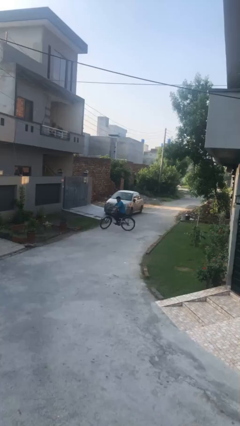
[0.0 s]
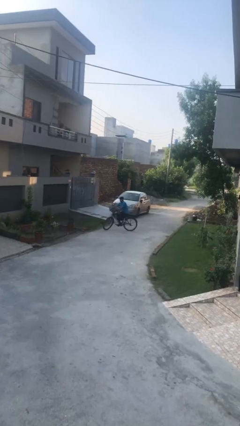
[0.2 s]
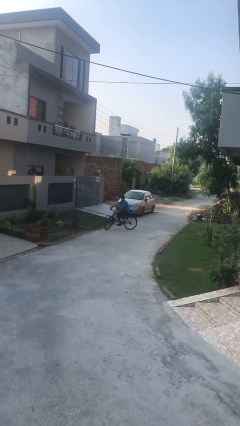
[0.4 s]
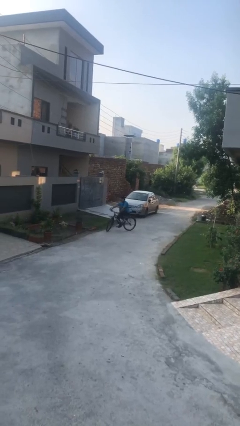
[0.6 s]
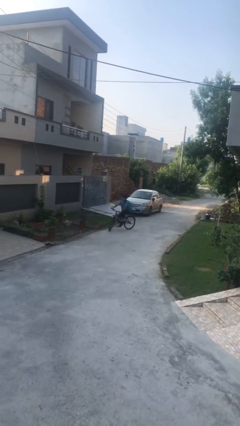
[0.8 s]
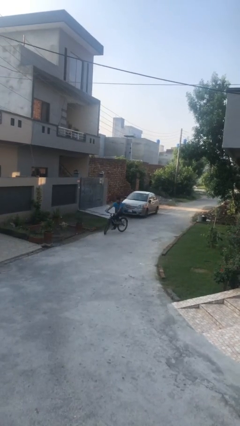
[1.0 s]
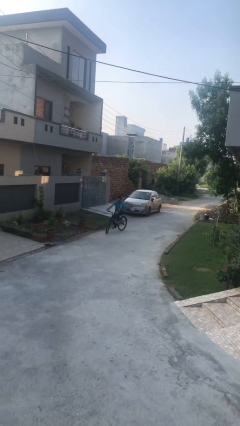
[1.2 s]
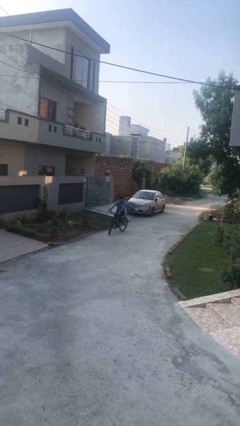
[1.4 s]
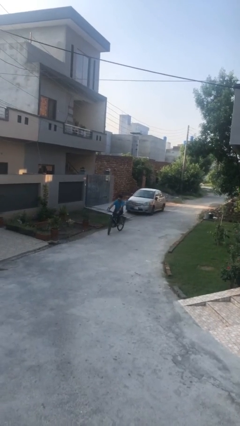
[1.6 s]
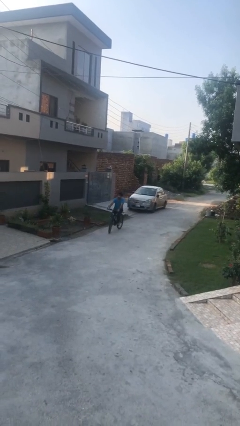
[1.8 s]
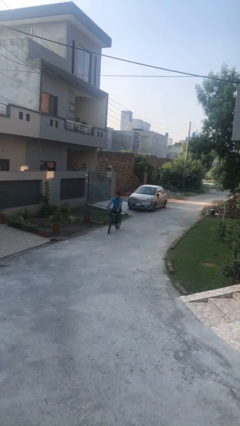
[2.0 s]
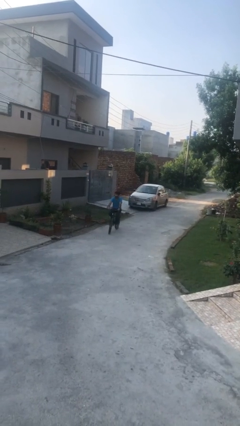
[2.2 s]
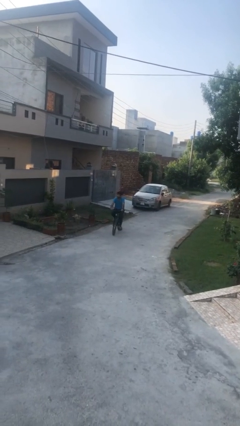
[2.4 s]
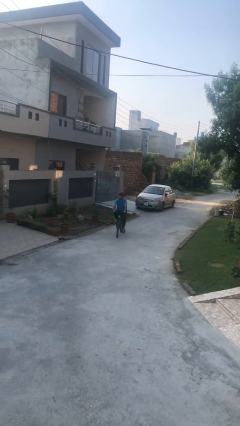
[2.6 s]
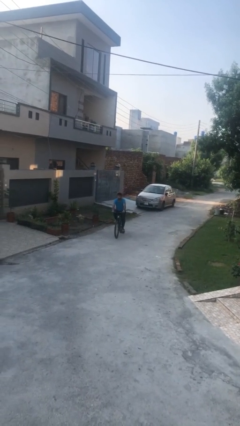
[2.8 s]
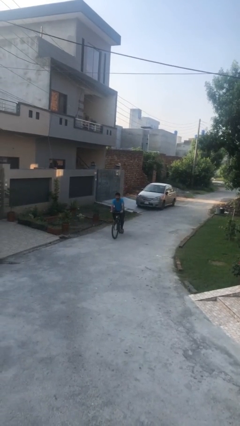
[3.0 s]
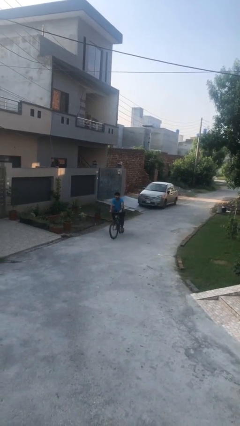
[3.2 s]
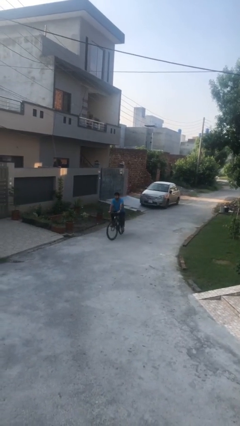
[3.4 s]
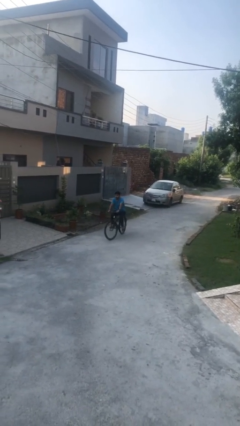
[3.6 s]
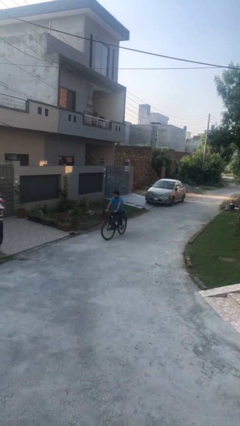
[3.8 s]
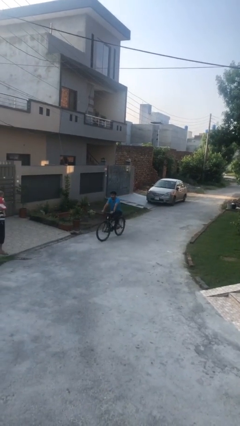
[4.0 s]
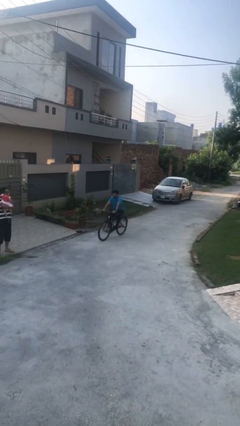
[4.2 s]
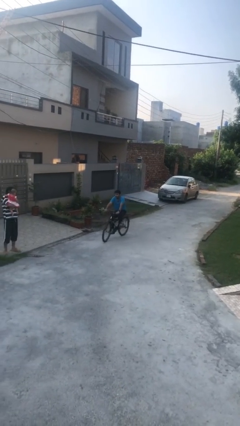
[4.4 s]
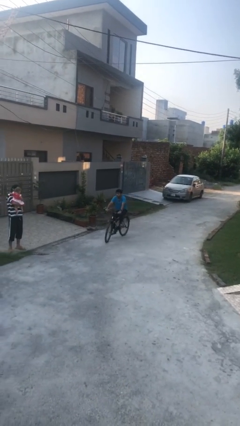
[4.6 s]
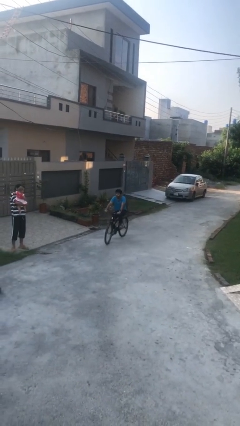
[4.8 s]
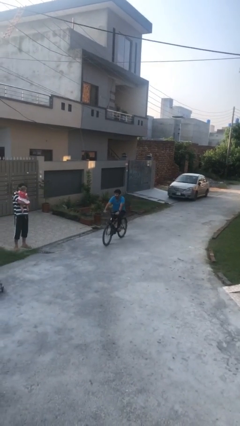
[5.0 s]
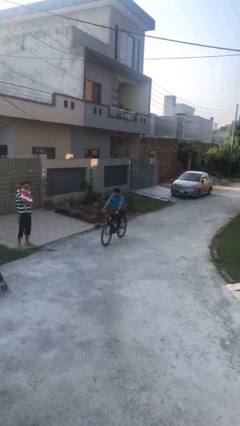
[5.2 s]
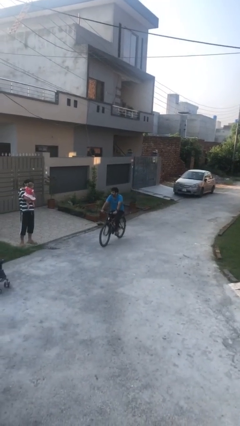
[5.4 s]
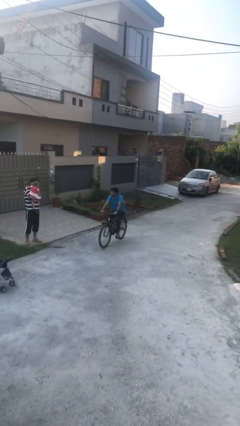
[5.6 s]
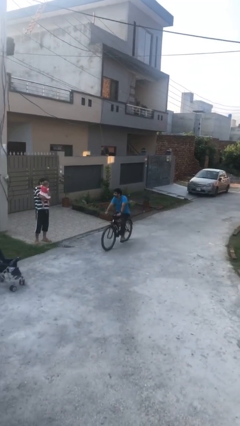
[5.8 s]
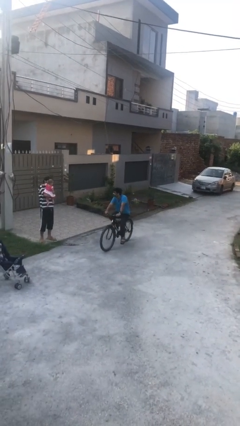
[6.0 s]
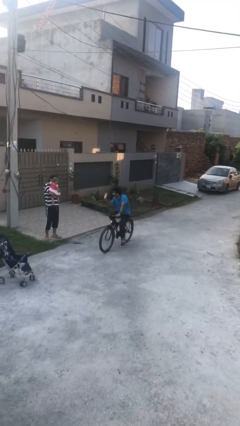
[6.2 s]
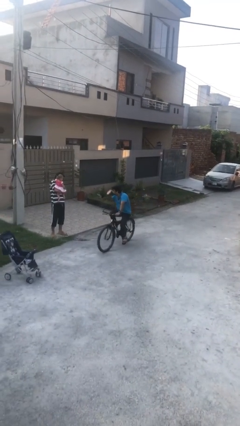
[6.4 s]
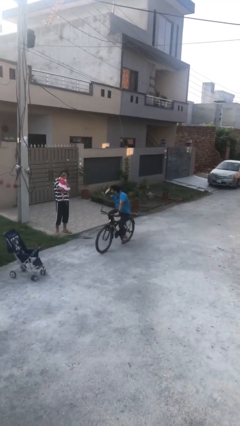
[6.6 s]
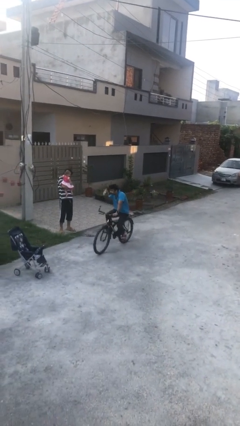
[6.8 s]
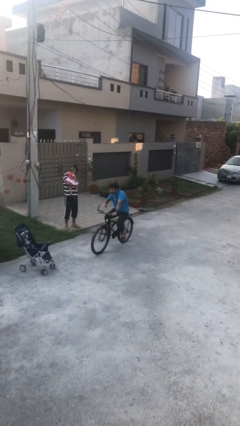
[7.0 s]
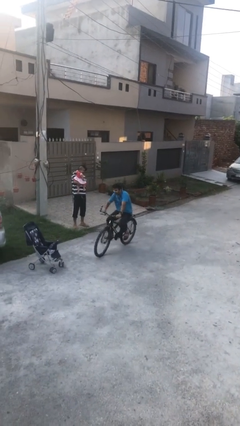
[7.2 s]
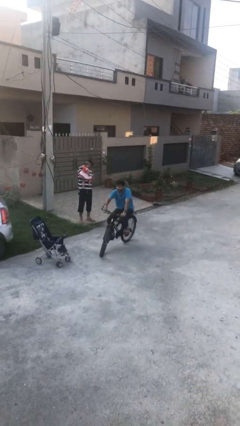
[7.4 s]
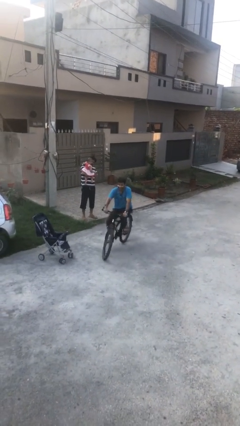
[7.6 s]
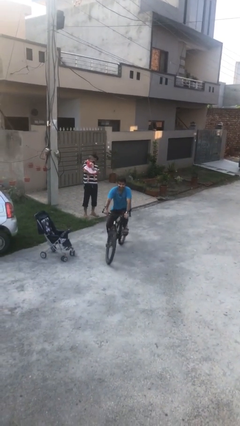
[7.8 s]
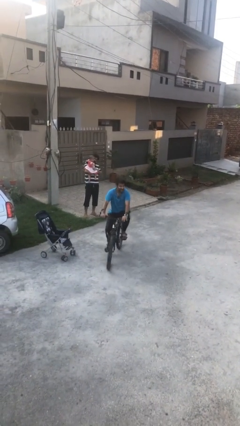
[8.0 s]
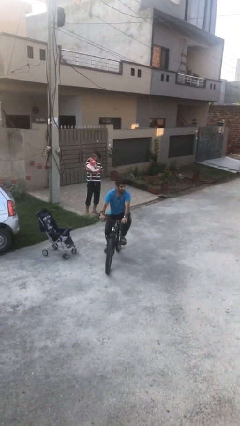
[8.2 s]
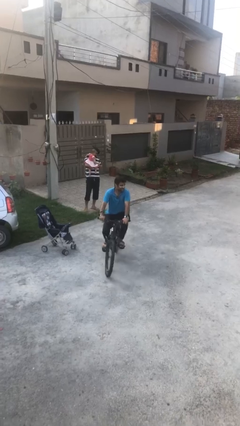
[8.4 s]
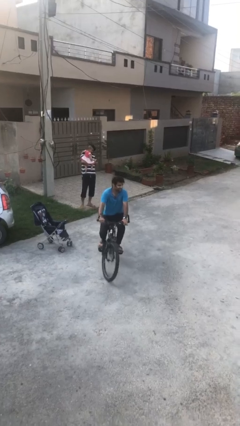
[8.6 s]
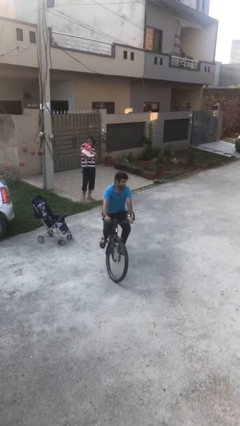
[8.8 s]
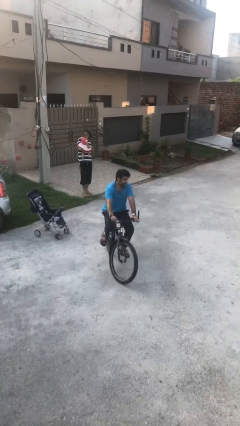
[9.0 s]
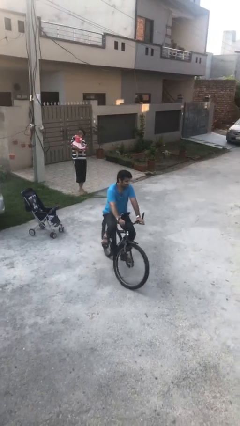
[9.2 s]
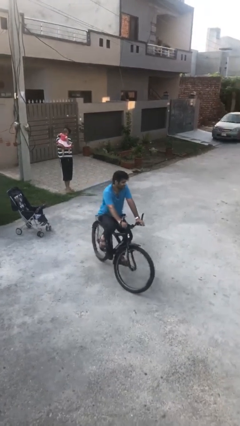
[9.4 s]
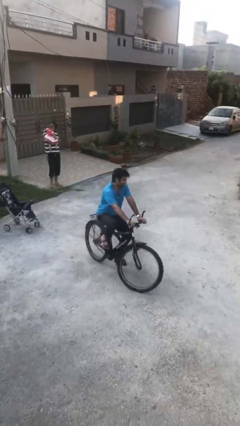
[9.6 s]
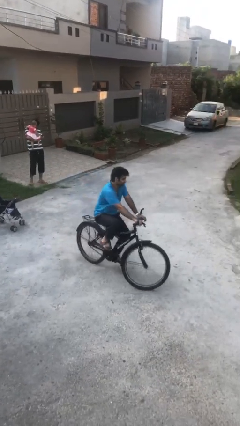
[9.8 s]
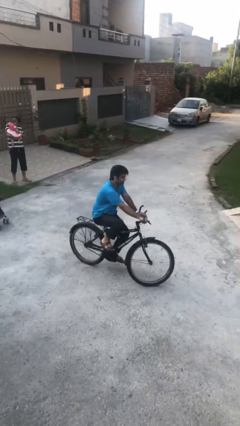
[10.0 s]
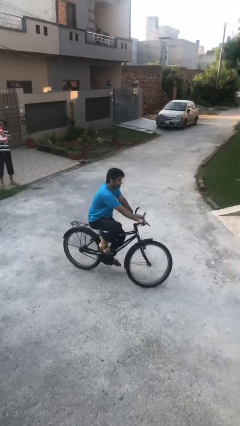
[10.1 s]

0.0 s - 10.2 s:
person rides bicycle

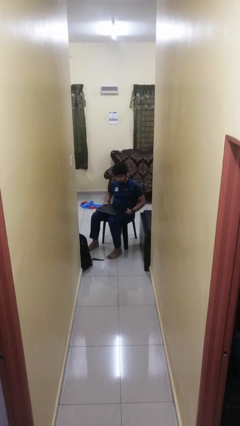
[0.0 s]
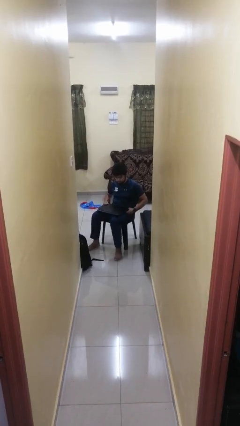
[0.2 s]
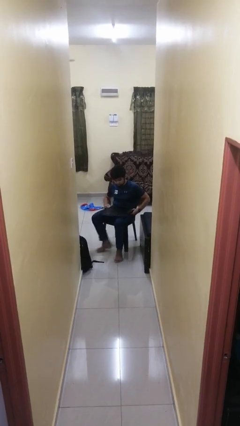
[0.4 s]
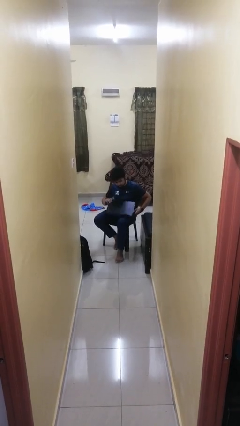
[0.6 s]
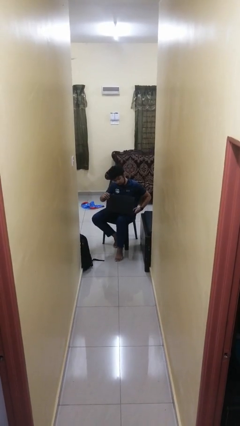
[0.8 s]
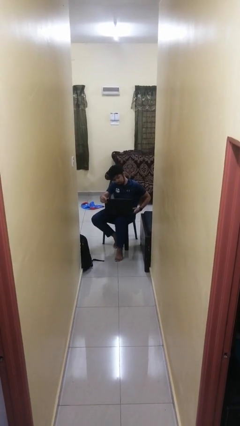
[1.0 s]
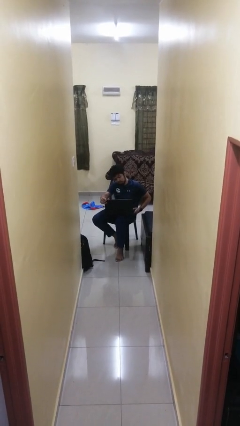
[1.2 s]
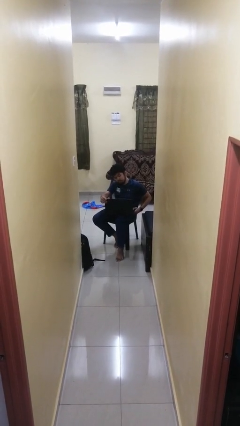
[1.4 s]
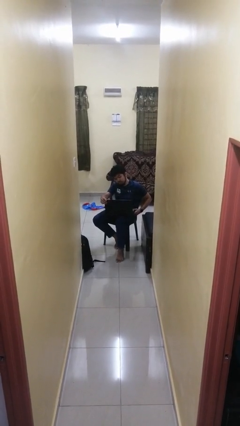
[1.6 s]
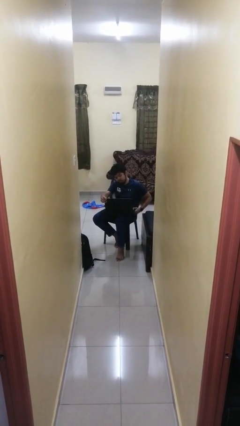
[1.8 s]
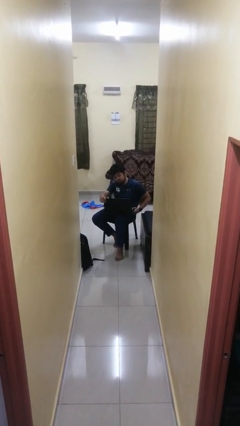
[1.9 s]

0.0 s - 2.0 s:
person opens laptop

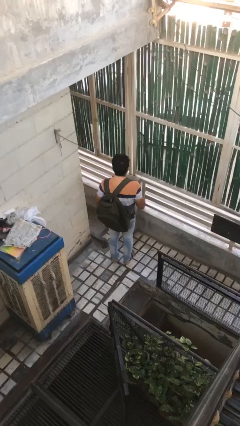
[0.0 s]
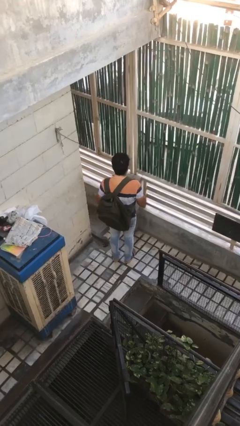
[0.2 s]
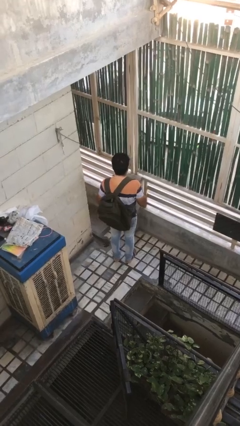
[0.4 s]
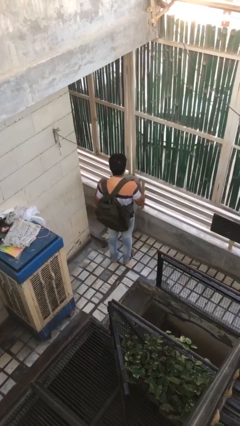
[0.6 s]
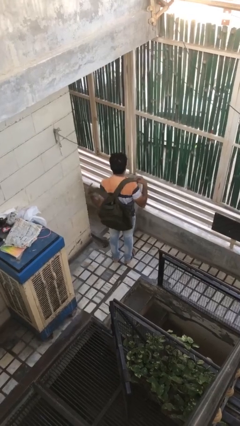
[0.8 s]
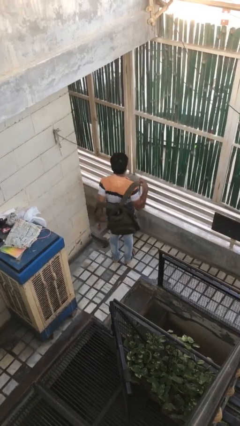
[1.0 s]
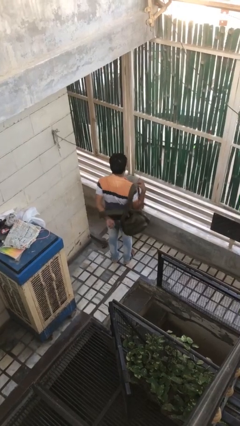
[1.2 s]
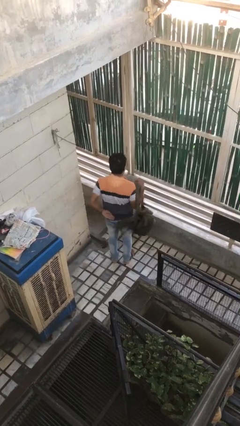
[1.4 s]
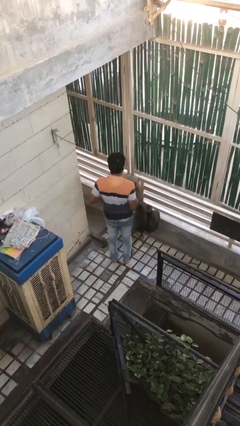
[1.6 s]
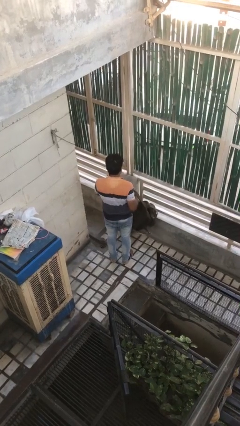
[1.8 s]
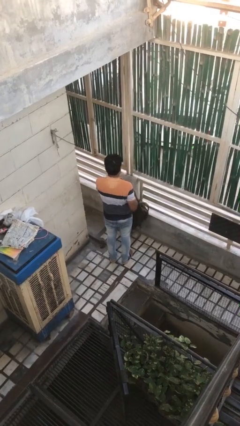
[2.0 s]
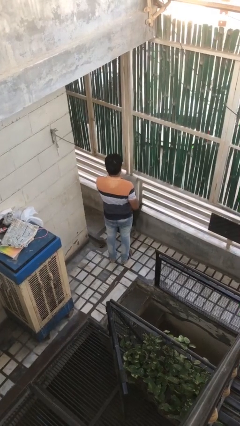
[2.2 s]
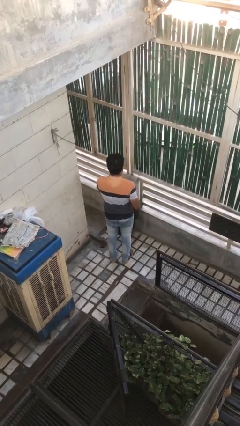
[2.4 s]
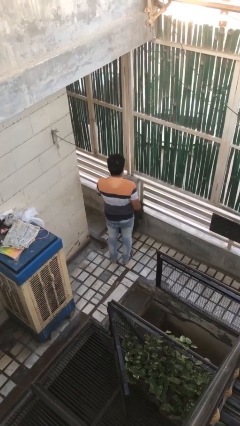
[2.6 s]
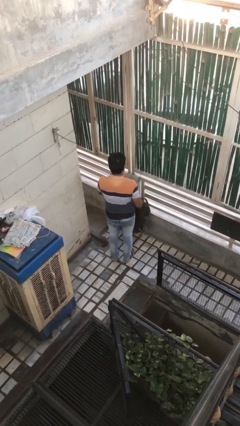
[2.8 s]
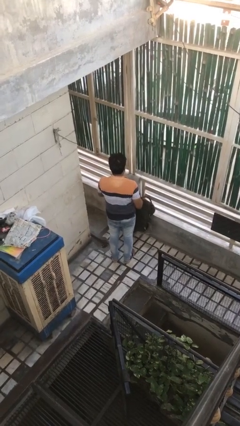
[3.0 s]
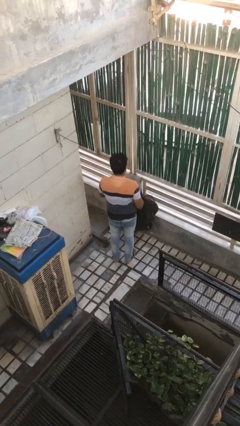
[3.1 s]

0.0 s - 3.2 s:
person takes off backpack

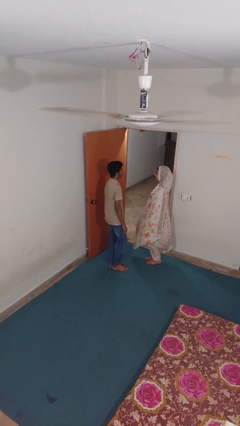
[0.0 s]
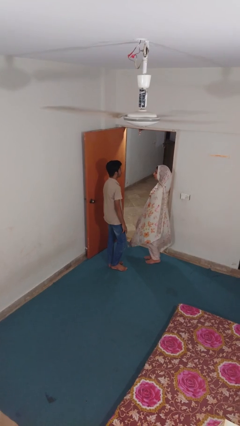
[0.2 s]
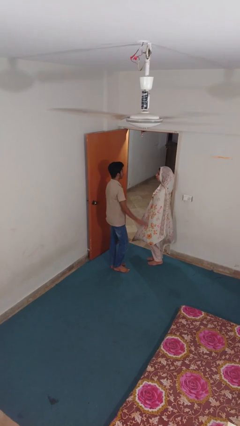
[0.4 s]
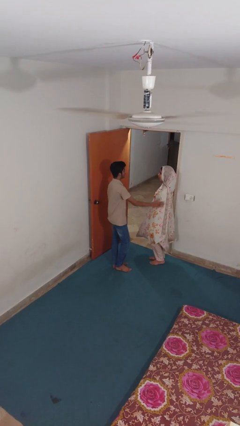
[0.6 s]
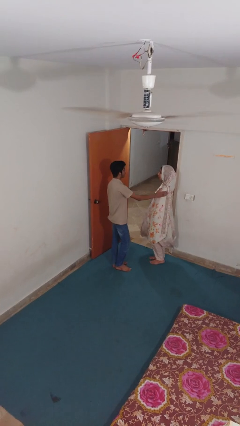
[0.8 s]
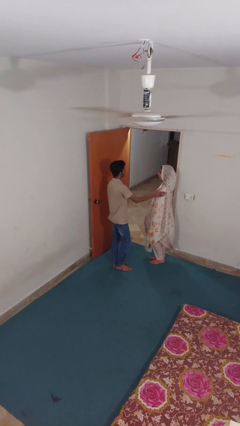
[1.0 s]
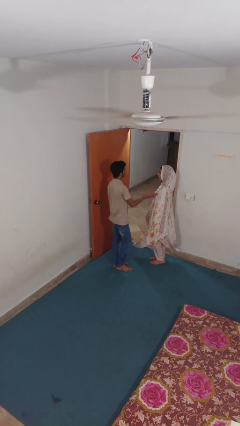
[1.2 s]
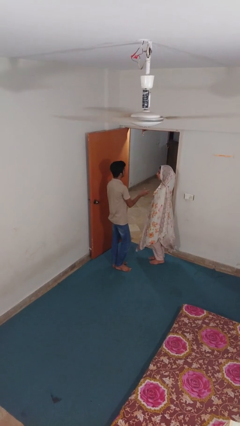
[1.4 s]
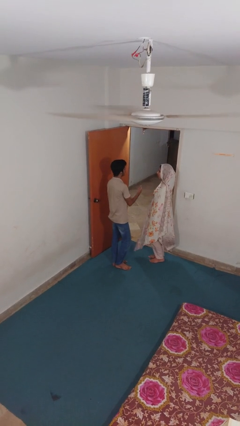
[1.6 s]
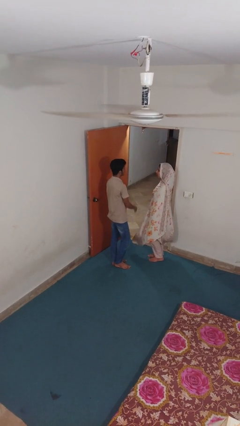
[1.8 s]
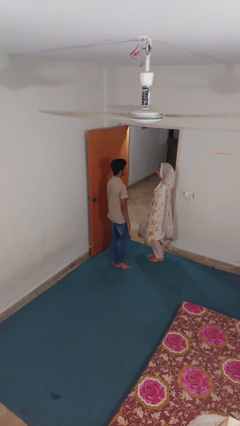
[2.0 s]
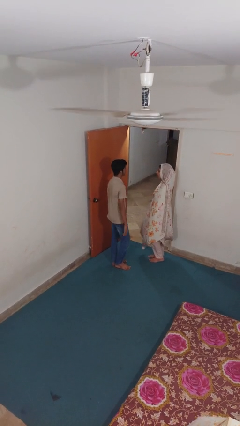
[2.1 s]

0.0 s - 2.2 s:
person shoves person
